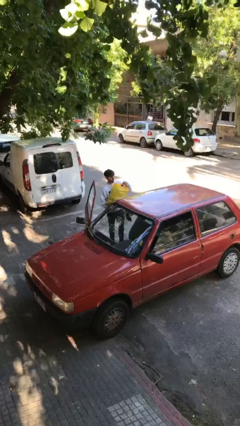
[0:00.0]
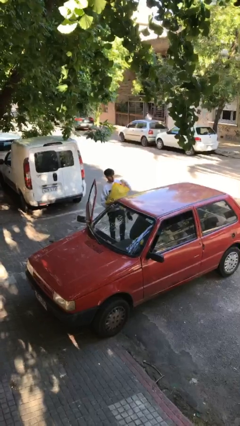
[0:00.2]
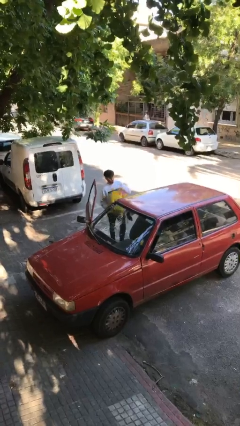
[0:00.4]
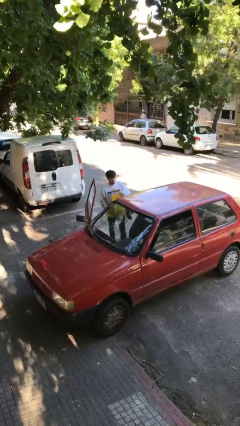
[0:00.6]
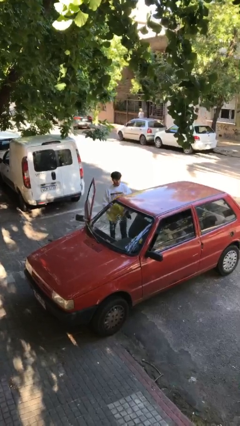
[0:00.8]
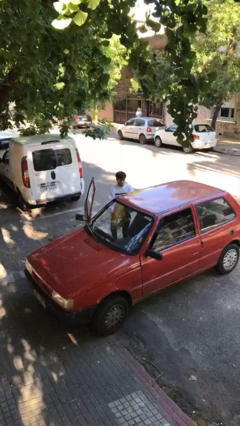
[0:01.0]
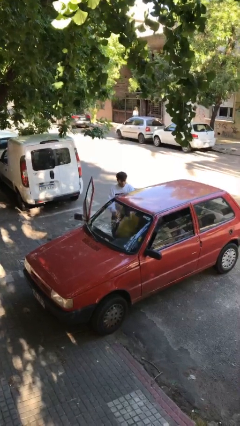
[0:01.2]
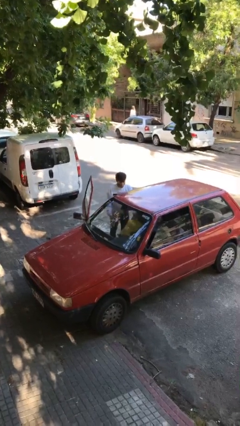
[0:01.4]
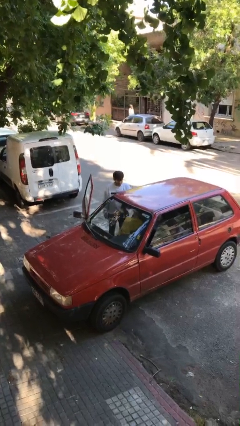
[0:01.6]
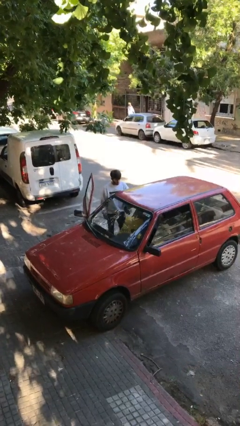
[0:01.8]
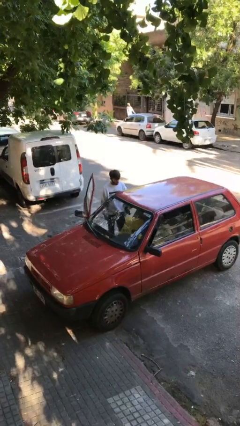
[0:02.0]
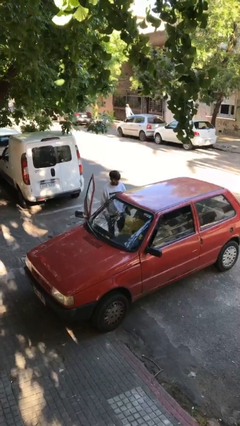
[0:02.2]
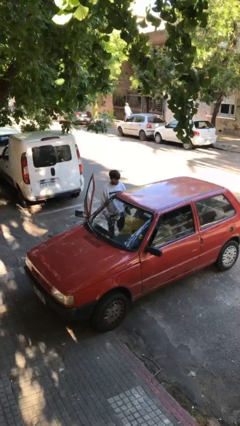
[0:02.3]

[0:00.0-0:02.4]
person loads car

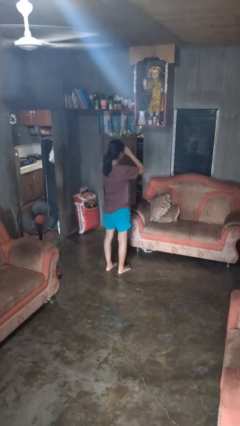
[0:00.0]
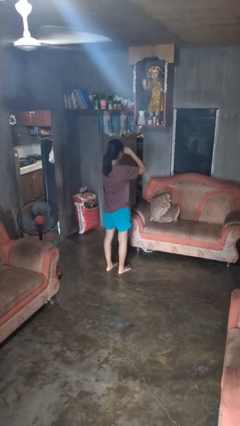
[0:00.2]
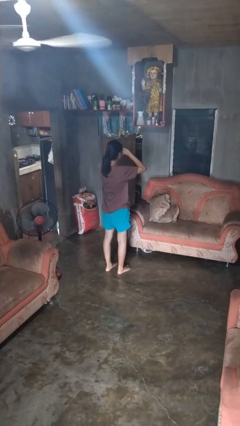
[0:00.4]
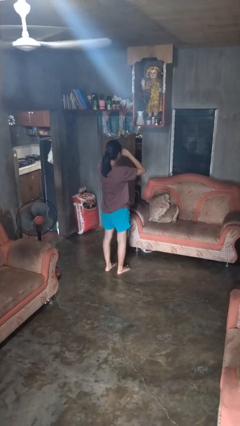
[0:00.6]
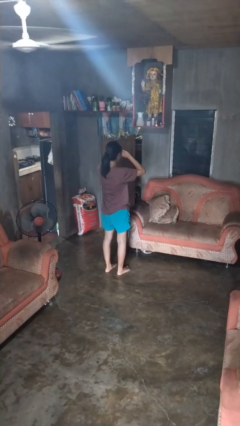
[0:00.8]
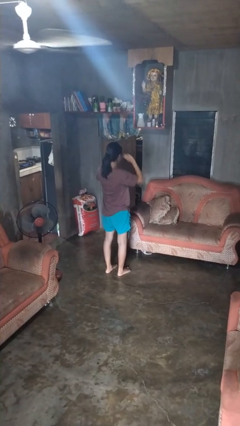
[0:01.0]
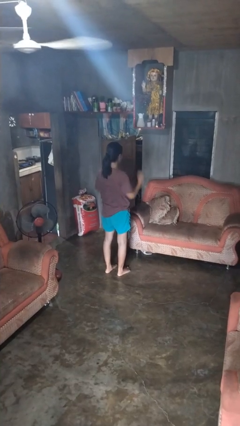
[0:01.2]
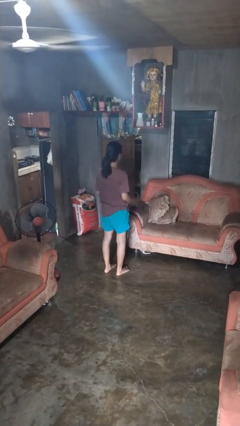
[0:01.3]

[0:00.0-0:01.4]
person rubs eyes

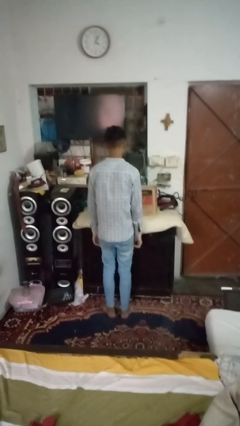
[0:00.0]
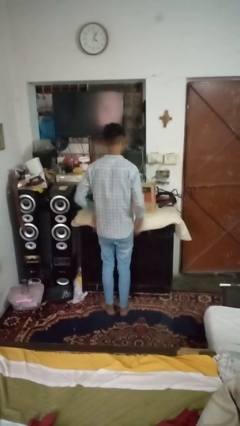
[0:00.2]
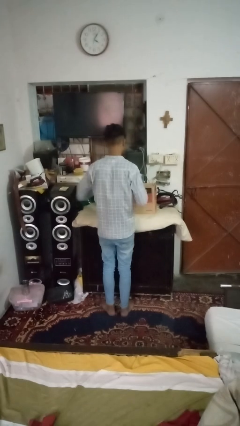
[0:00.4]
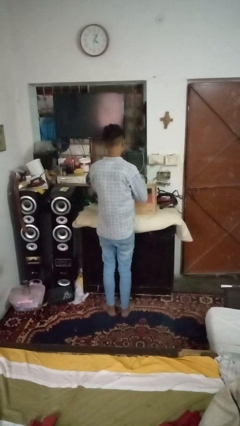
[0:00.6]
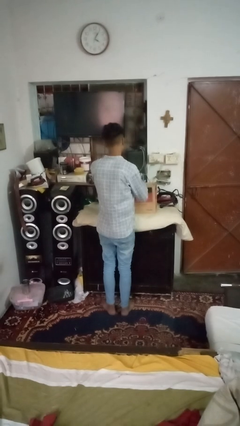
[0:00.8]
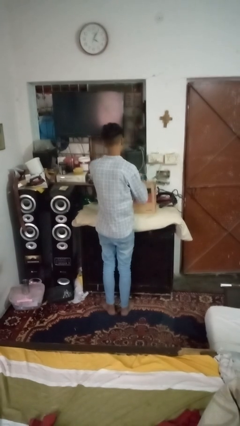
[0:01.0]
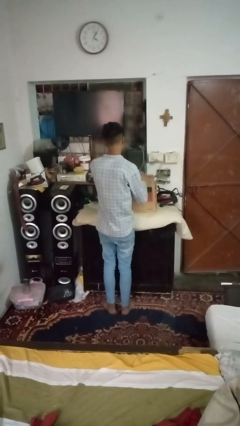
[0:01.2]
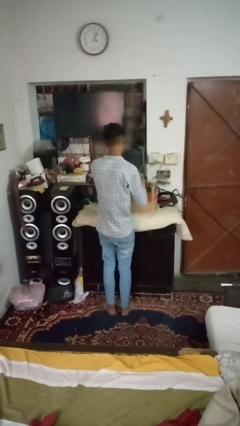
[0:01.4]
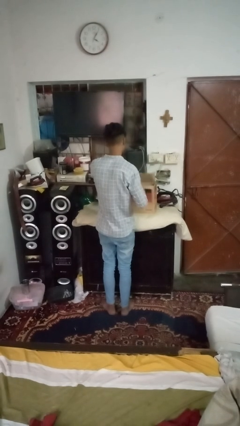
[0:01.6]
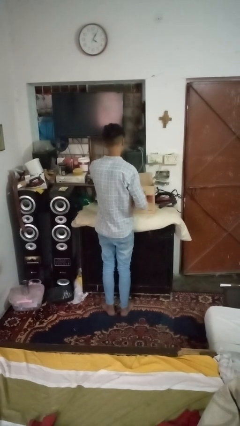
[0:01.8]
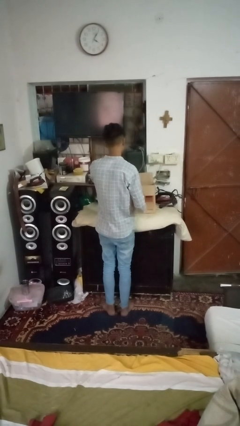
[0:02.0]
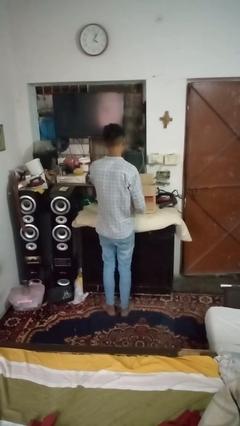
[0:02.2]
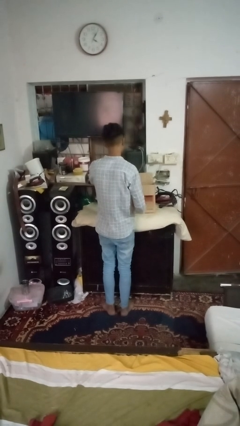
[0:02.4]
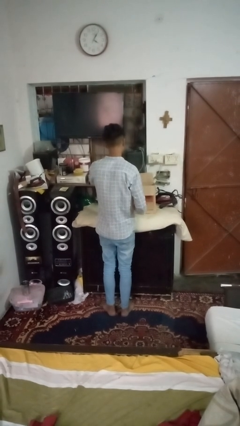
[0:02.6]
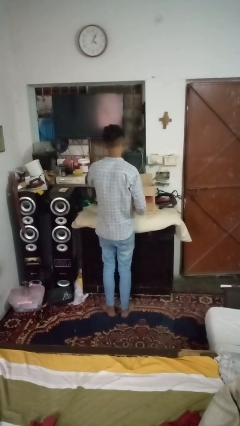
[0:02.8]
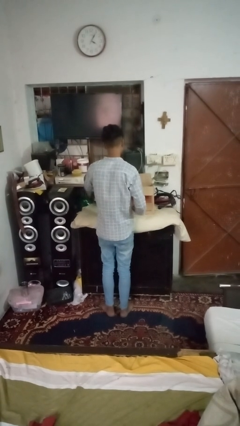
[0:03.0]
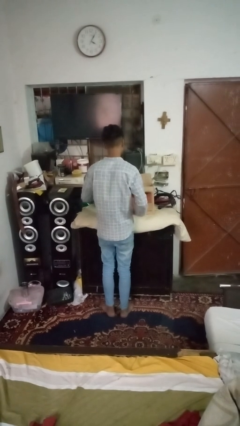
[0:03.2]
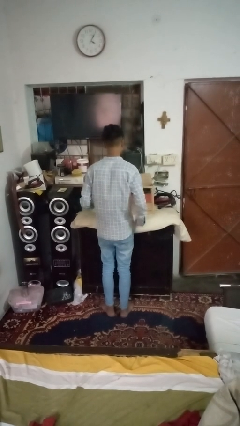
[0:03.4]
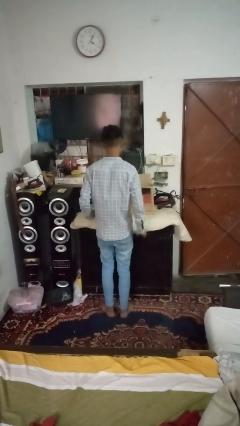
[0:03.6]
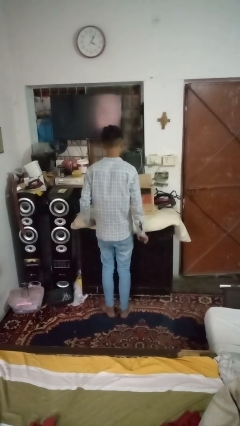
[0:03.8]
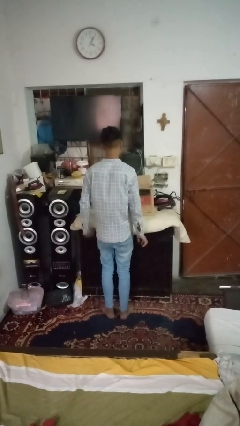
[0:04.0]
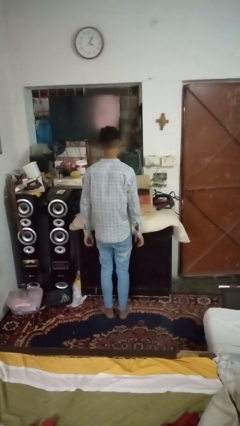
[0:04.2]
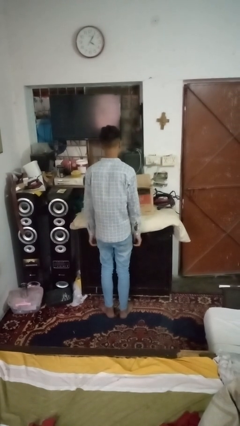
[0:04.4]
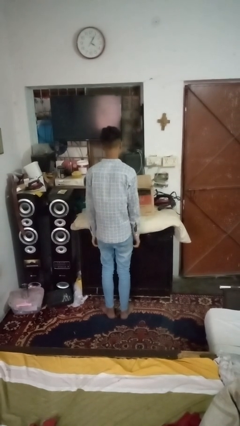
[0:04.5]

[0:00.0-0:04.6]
person opens box

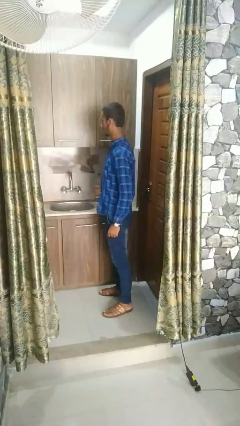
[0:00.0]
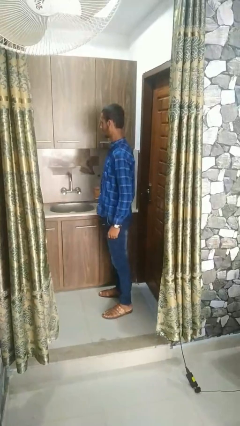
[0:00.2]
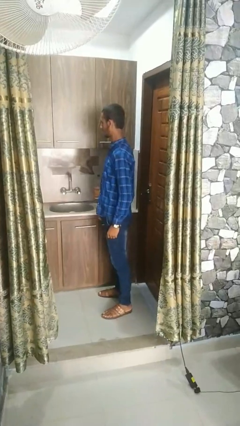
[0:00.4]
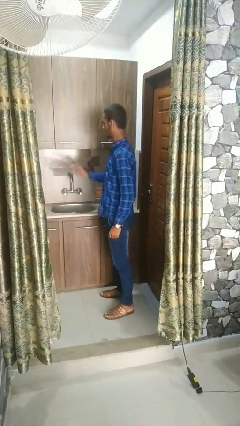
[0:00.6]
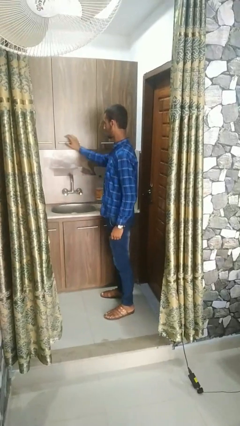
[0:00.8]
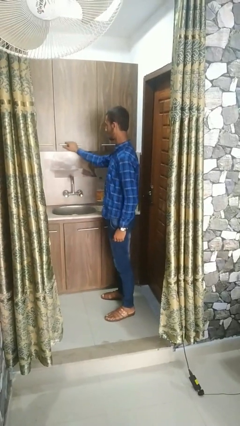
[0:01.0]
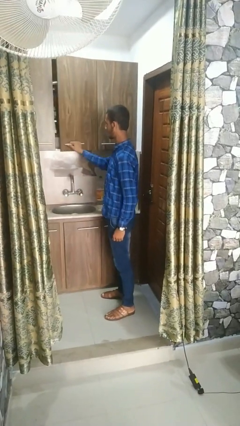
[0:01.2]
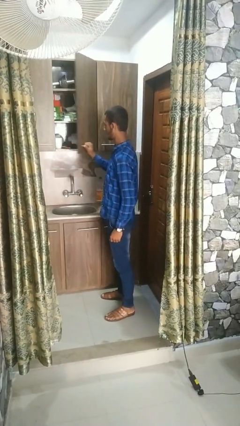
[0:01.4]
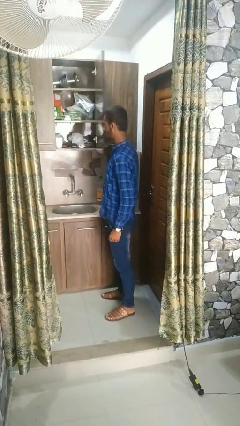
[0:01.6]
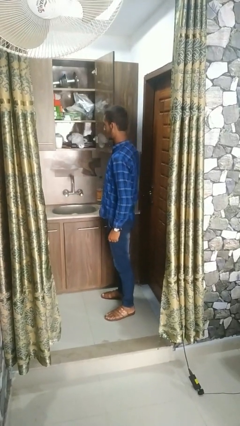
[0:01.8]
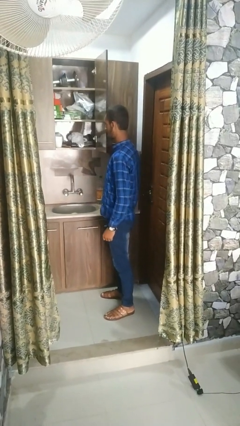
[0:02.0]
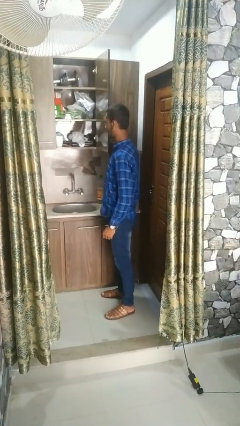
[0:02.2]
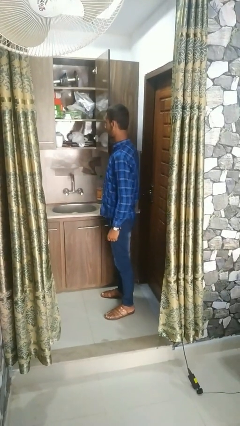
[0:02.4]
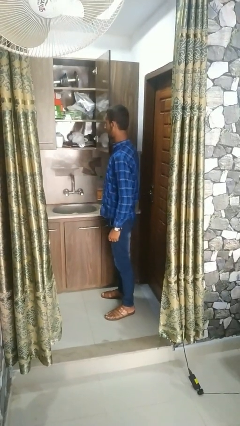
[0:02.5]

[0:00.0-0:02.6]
person opens cabinet

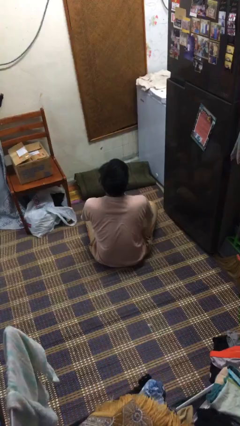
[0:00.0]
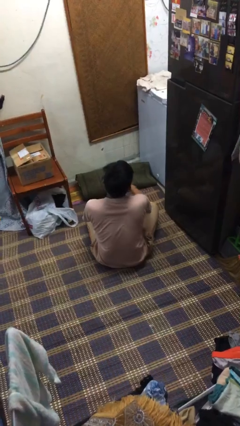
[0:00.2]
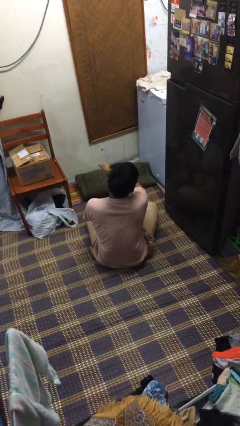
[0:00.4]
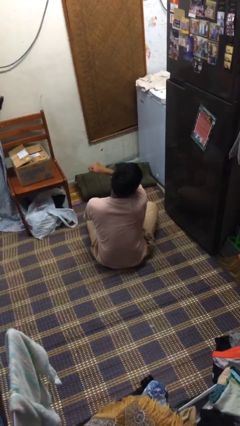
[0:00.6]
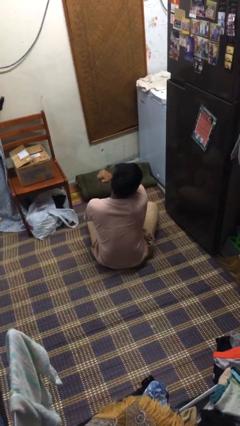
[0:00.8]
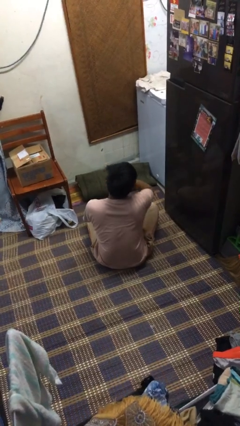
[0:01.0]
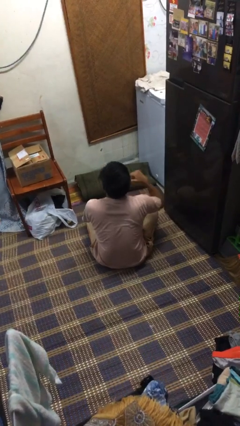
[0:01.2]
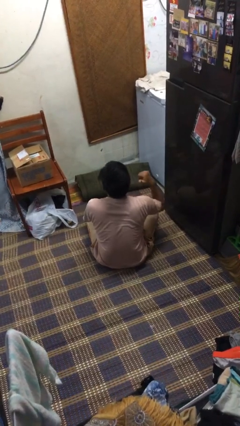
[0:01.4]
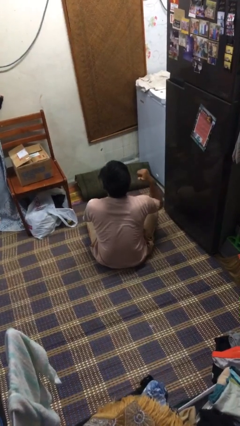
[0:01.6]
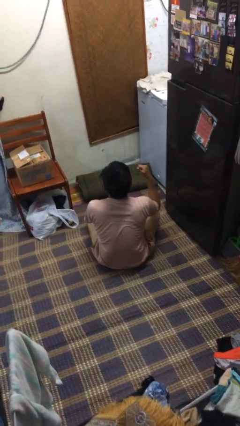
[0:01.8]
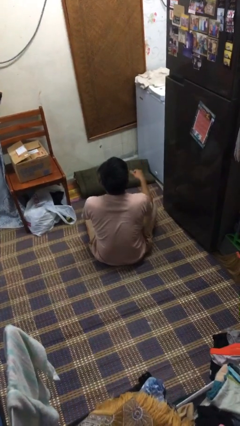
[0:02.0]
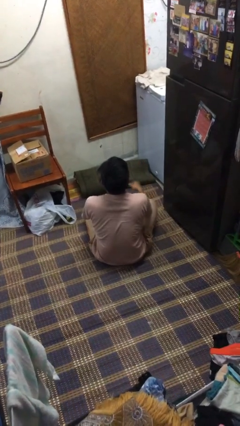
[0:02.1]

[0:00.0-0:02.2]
person gestures cut

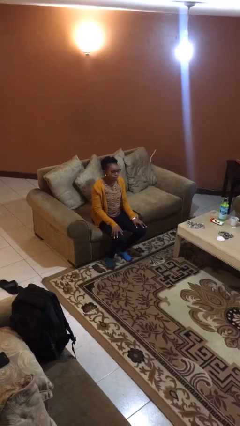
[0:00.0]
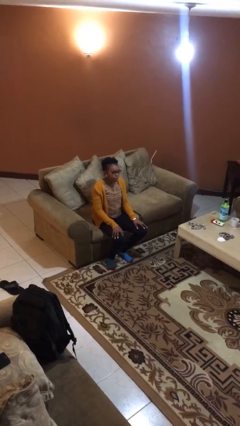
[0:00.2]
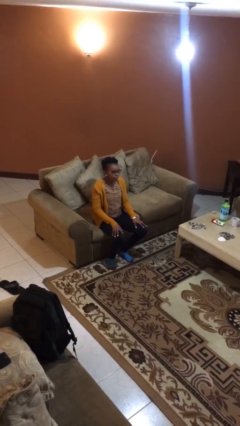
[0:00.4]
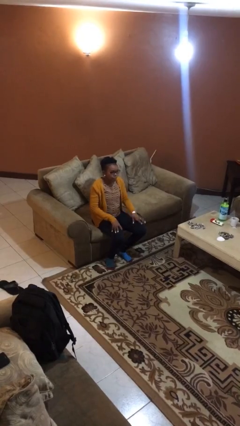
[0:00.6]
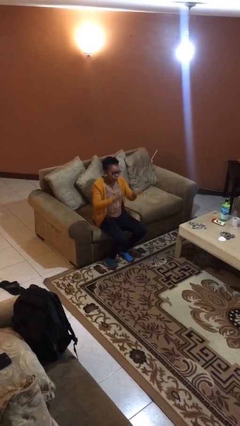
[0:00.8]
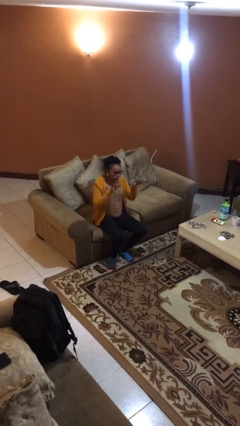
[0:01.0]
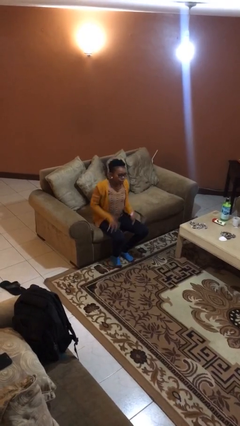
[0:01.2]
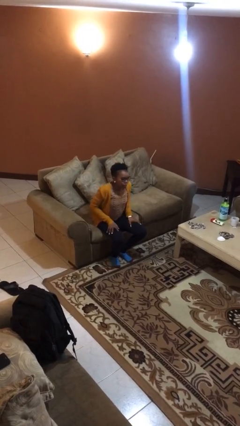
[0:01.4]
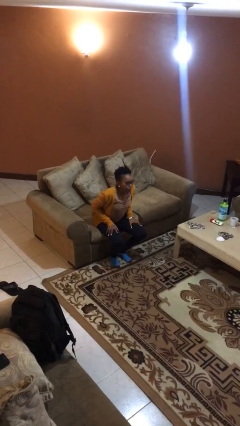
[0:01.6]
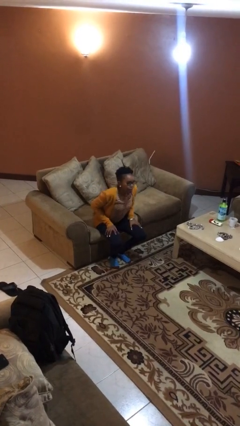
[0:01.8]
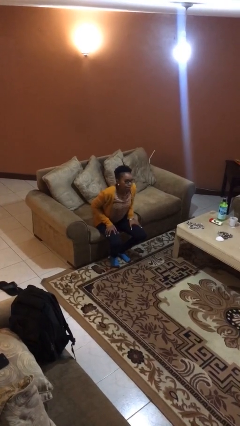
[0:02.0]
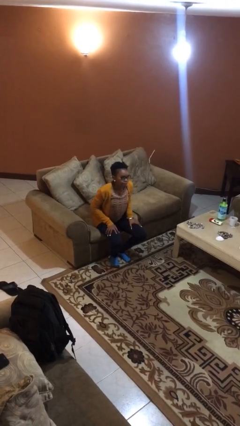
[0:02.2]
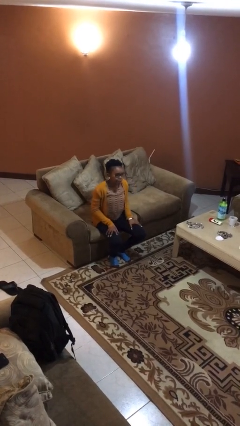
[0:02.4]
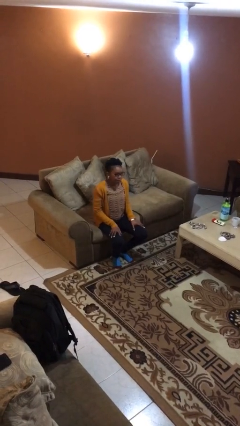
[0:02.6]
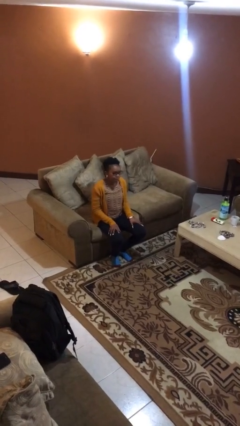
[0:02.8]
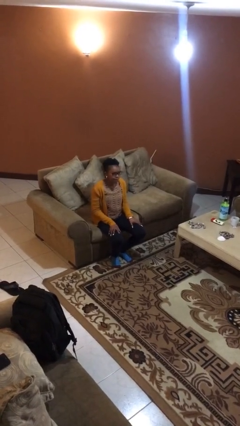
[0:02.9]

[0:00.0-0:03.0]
person slaps hands on thighs

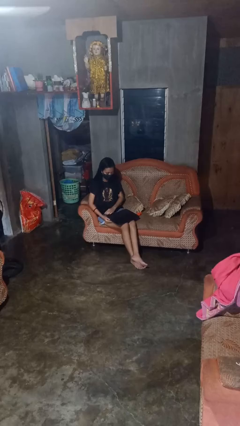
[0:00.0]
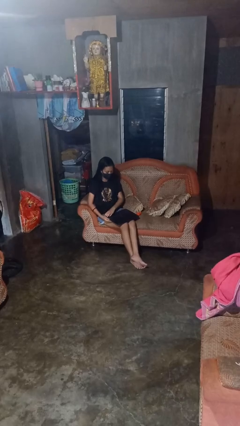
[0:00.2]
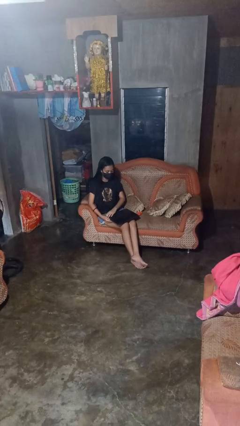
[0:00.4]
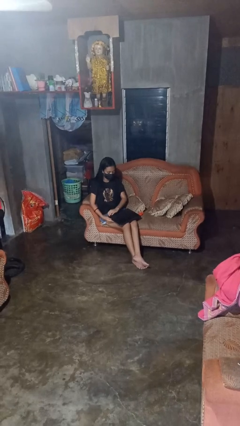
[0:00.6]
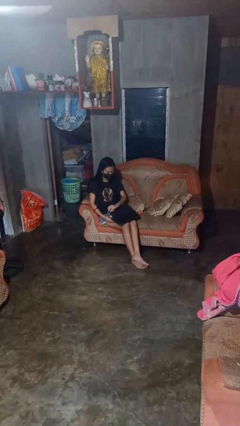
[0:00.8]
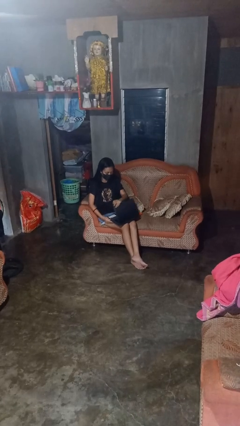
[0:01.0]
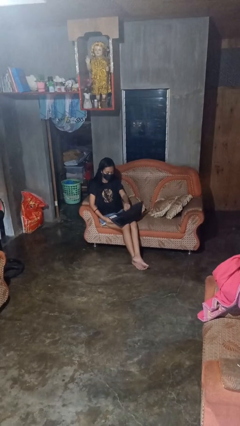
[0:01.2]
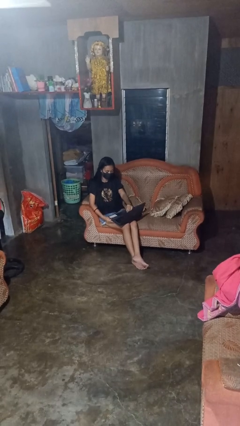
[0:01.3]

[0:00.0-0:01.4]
person opens laptop
